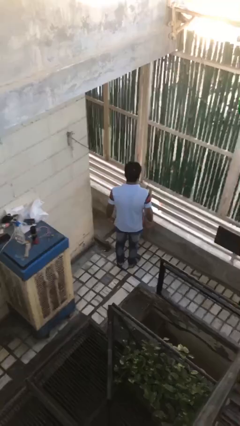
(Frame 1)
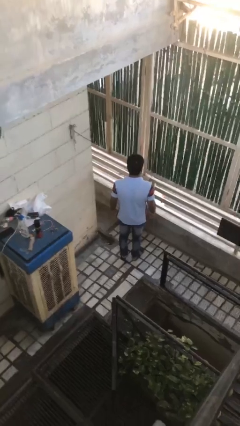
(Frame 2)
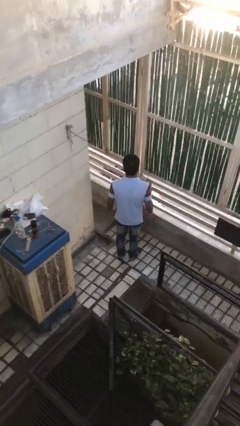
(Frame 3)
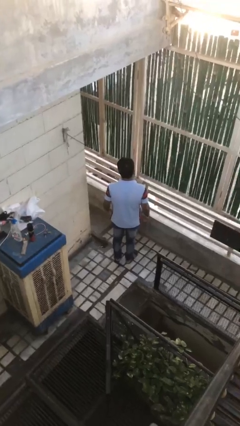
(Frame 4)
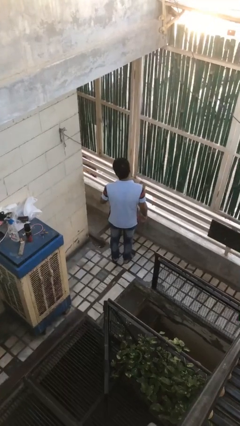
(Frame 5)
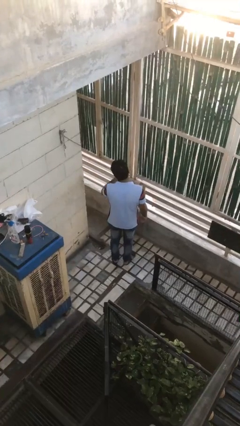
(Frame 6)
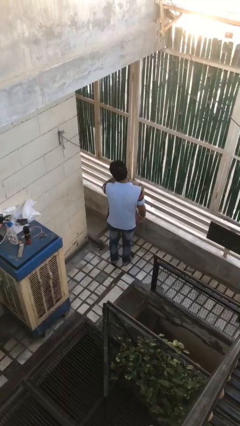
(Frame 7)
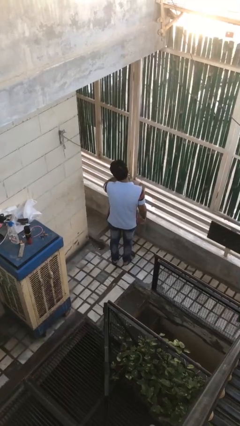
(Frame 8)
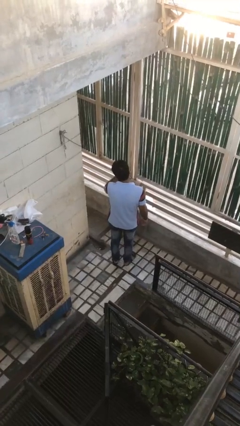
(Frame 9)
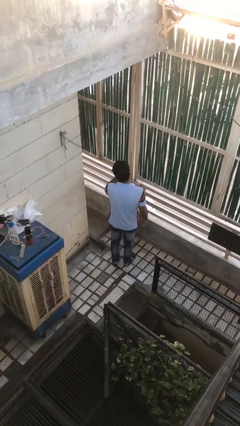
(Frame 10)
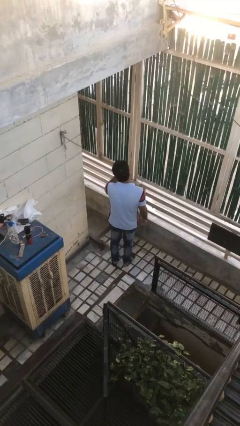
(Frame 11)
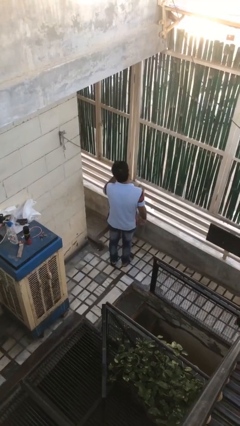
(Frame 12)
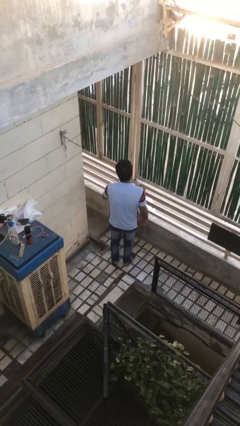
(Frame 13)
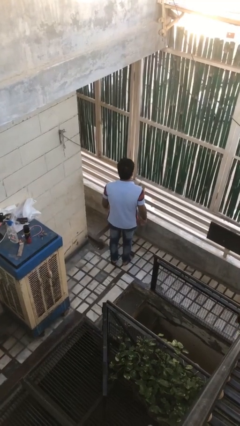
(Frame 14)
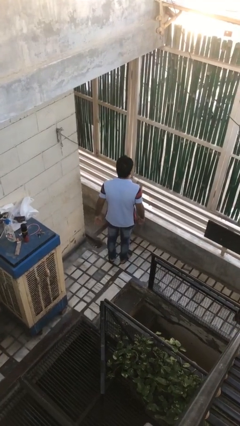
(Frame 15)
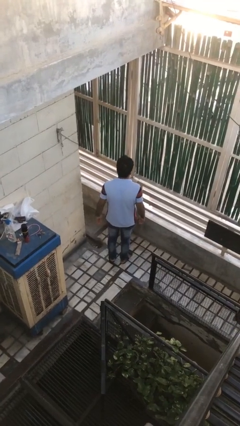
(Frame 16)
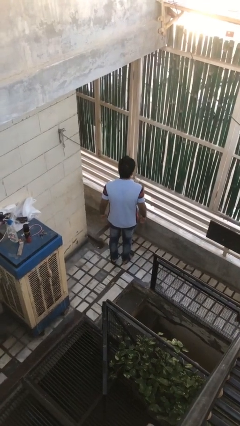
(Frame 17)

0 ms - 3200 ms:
person licks fingers

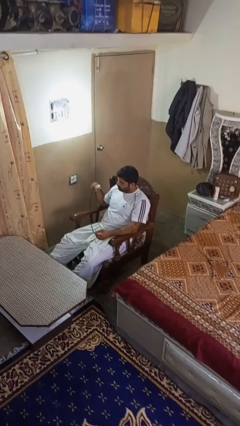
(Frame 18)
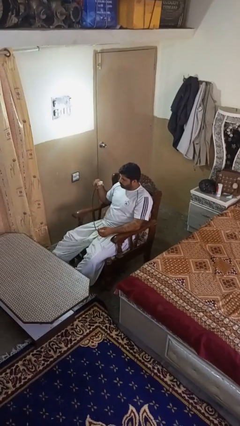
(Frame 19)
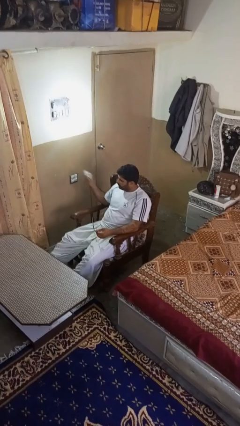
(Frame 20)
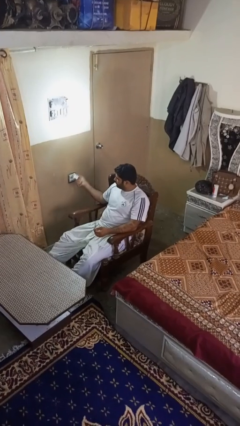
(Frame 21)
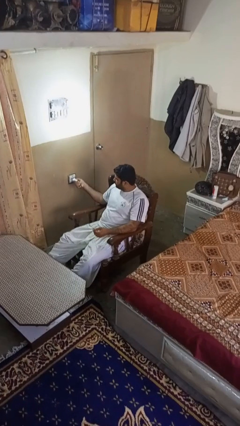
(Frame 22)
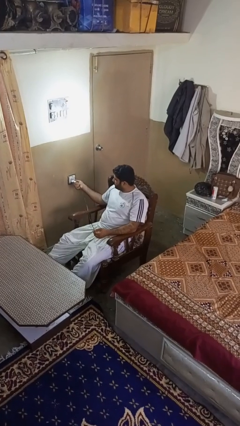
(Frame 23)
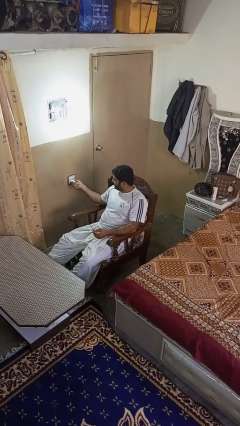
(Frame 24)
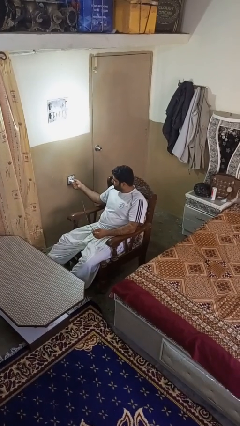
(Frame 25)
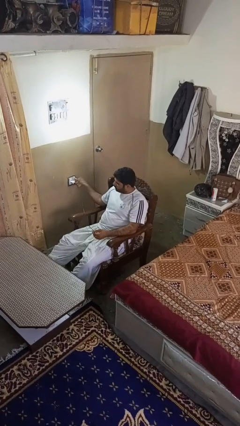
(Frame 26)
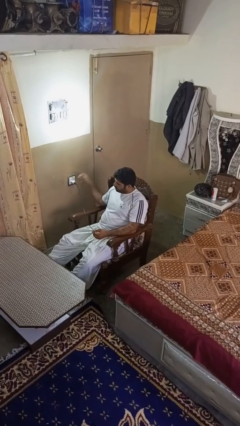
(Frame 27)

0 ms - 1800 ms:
person plugs into electrical socket

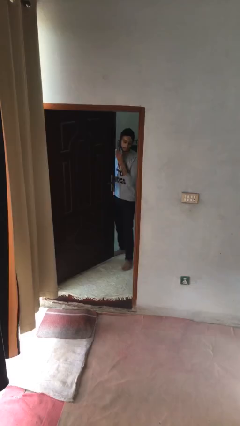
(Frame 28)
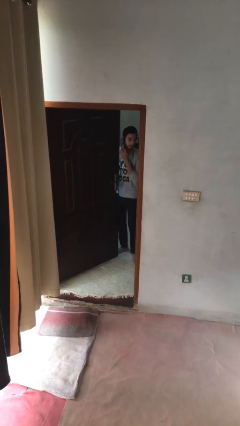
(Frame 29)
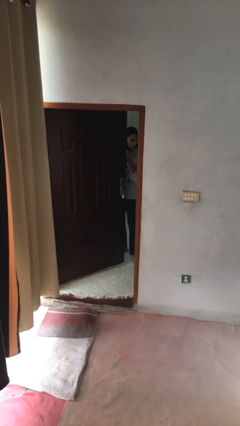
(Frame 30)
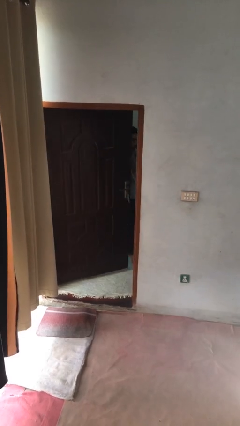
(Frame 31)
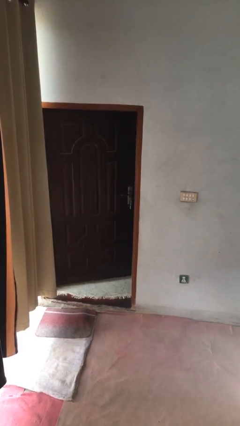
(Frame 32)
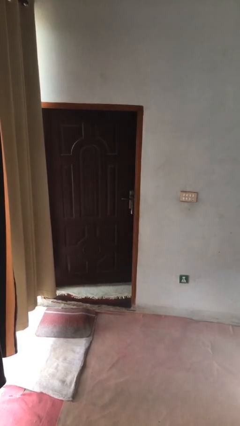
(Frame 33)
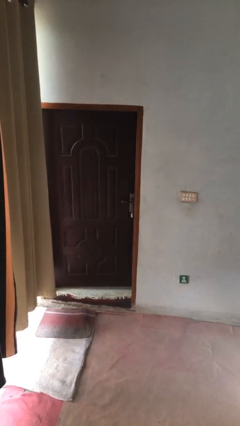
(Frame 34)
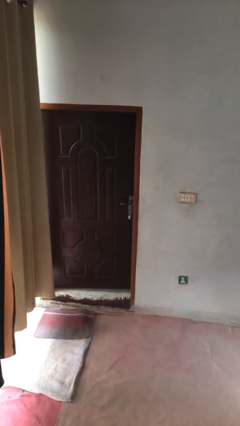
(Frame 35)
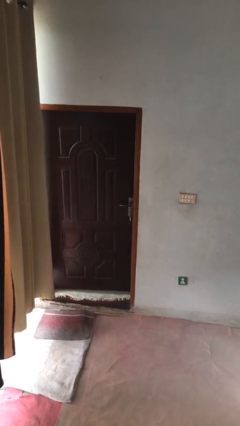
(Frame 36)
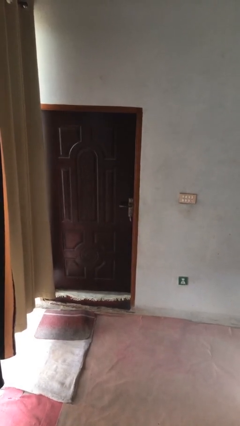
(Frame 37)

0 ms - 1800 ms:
person closes facility door

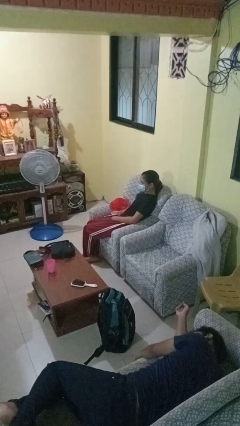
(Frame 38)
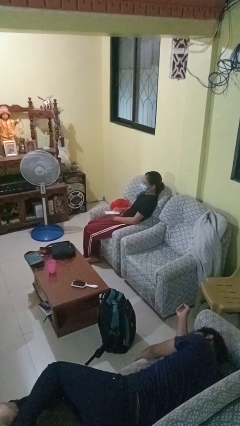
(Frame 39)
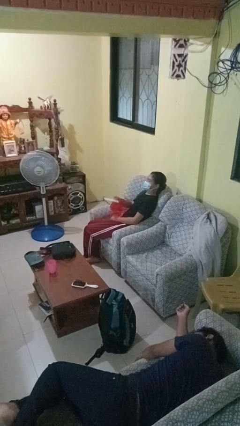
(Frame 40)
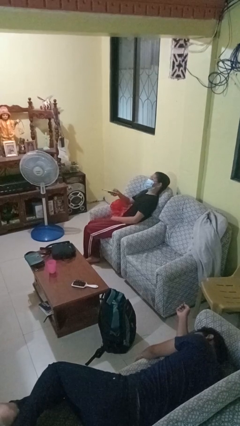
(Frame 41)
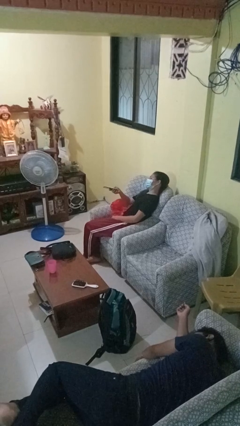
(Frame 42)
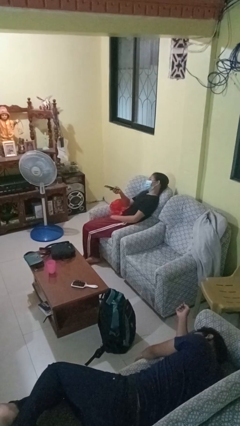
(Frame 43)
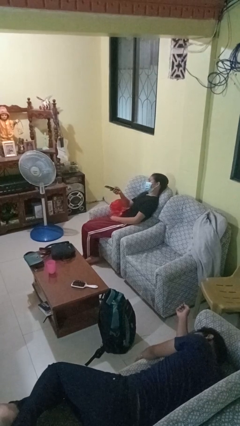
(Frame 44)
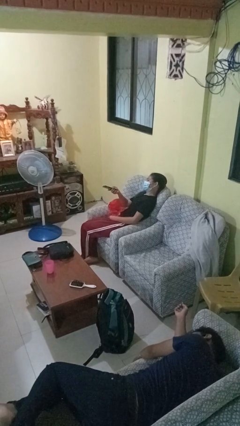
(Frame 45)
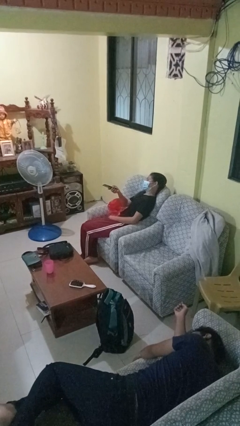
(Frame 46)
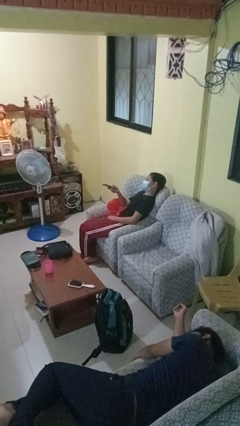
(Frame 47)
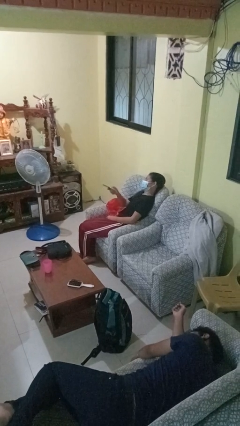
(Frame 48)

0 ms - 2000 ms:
person uses television remote

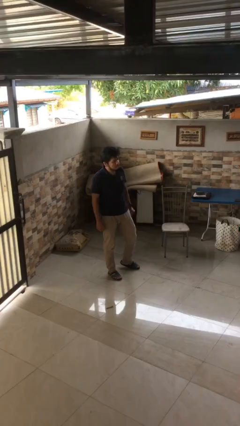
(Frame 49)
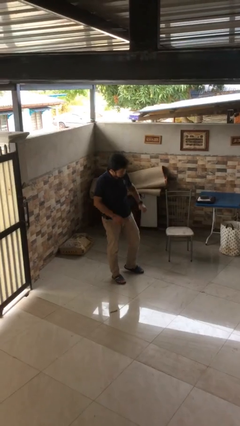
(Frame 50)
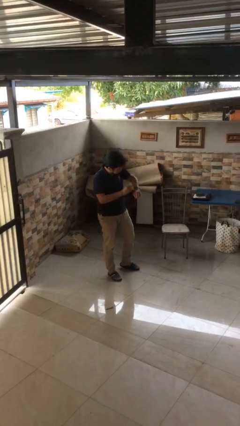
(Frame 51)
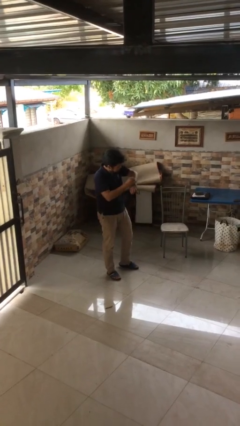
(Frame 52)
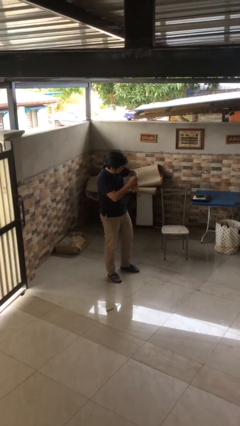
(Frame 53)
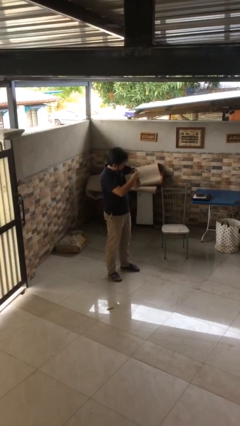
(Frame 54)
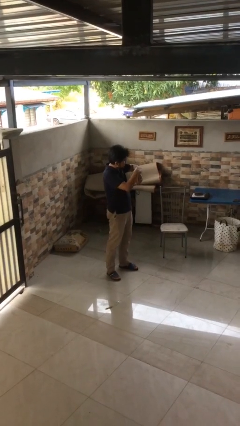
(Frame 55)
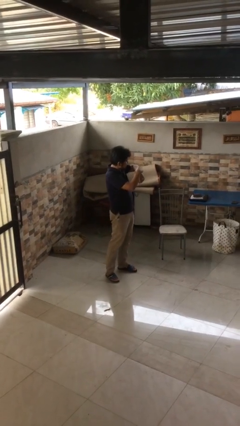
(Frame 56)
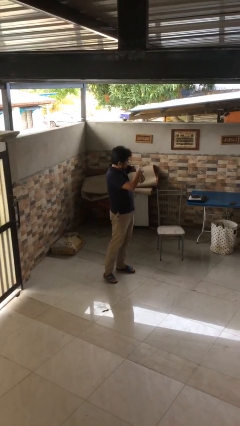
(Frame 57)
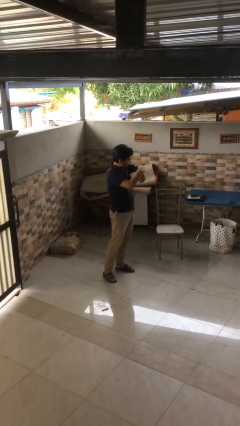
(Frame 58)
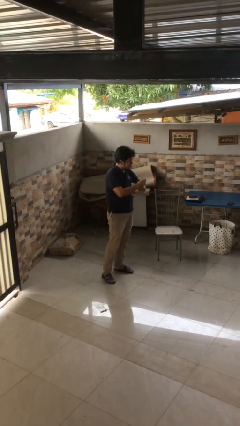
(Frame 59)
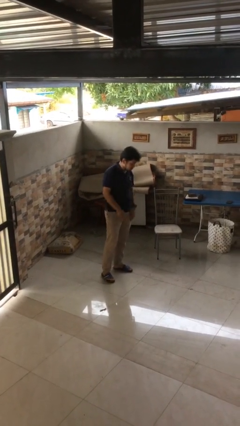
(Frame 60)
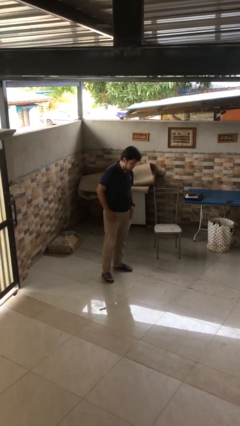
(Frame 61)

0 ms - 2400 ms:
person looks at wristwatch

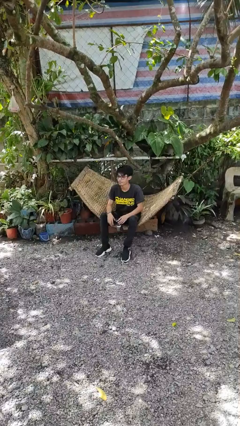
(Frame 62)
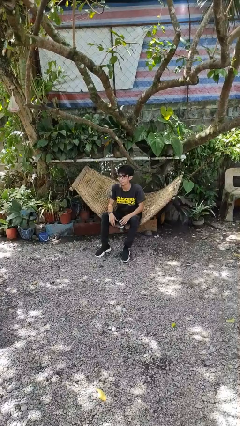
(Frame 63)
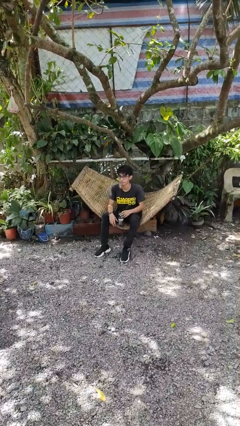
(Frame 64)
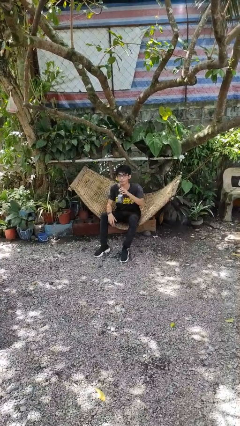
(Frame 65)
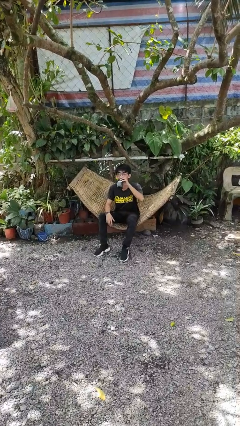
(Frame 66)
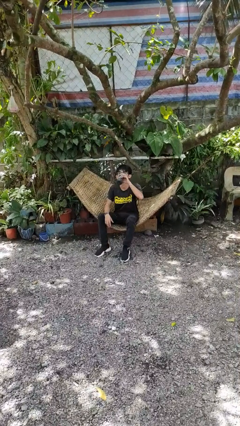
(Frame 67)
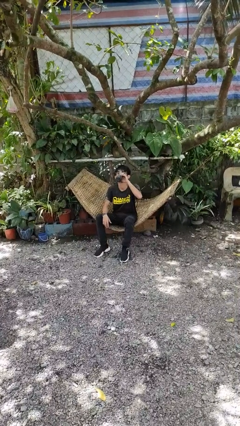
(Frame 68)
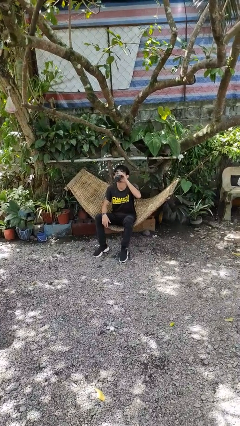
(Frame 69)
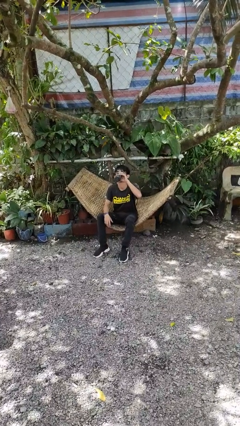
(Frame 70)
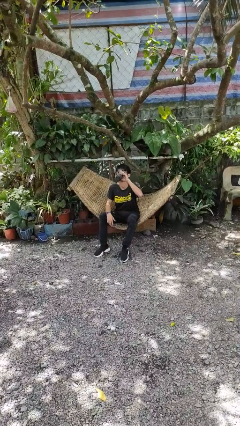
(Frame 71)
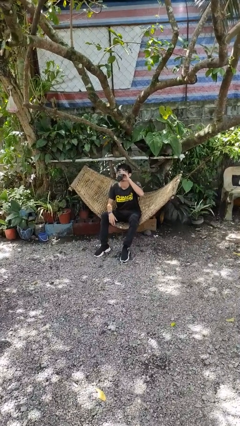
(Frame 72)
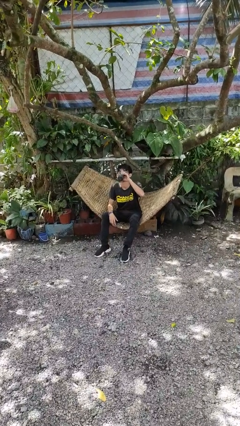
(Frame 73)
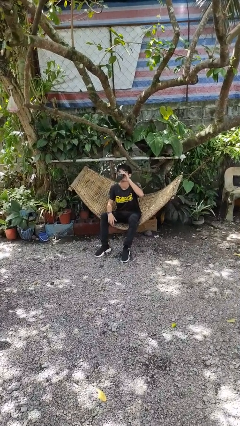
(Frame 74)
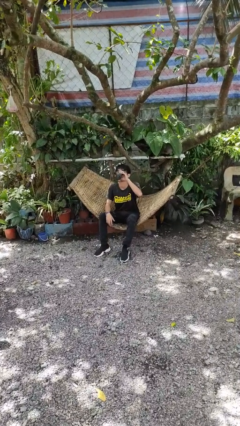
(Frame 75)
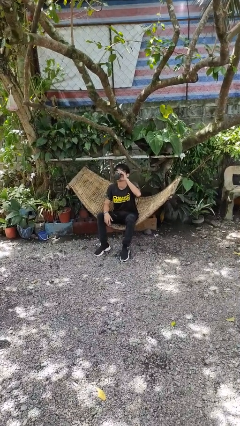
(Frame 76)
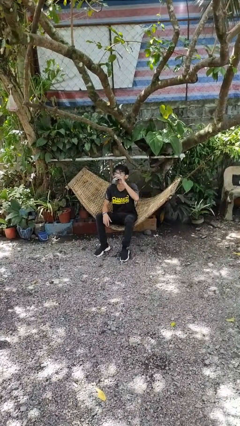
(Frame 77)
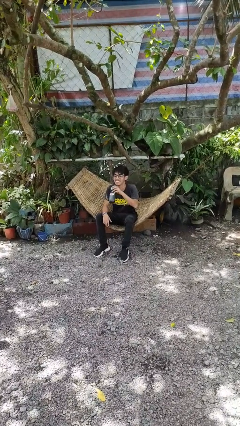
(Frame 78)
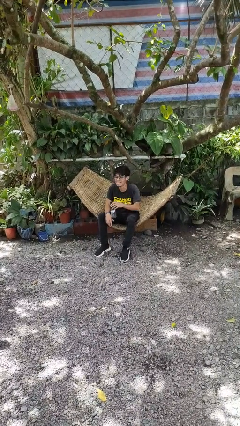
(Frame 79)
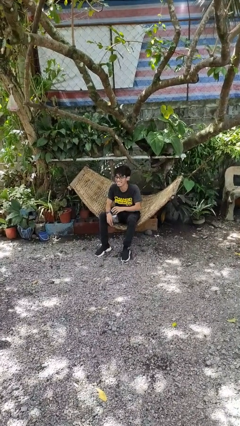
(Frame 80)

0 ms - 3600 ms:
person drinks from bottle

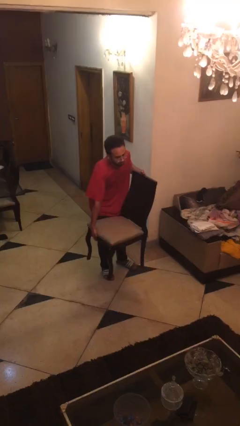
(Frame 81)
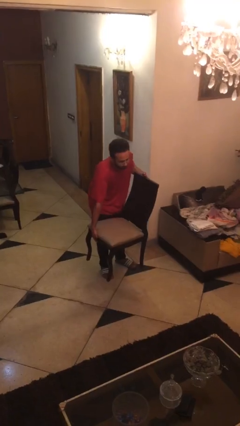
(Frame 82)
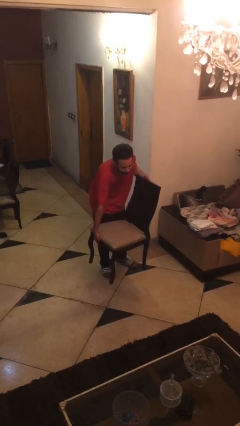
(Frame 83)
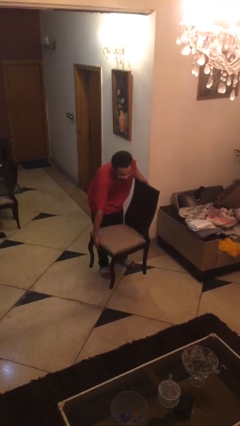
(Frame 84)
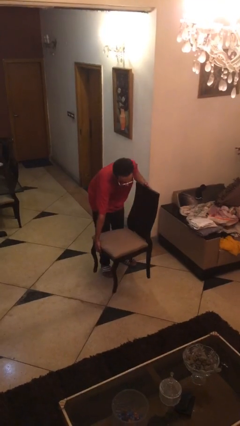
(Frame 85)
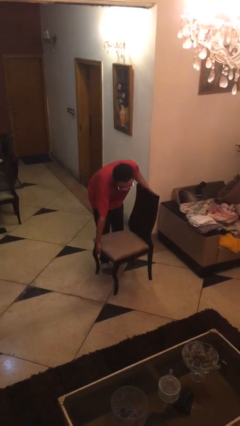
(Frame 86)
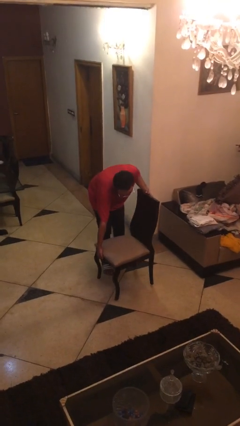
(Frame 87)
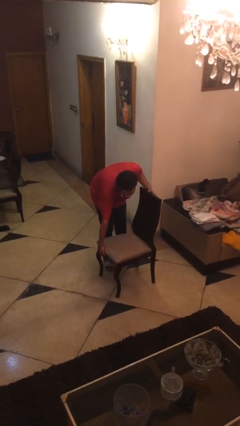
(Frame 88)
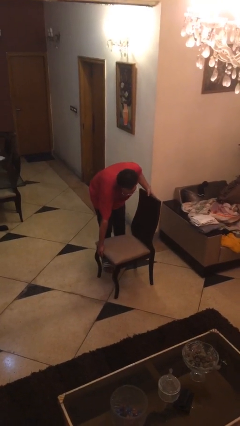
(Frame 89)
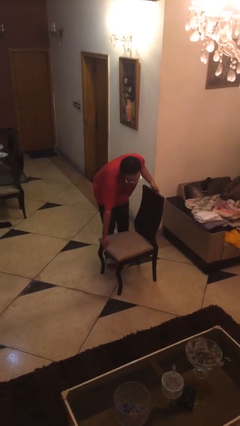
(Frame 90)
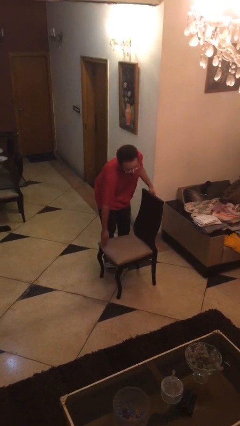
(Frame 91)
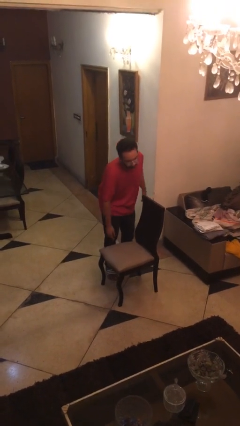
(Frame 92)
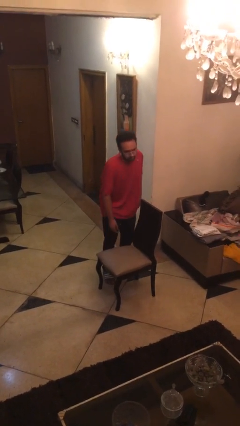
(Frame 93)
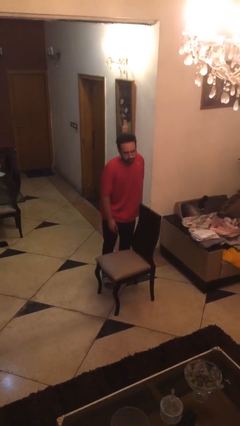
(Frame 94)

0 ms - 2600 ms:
person puts down object on floor
